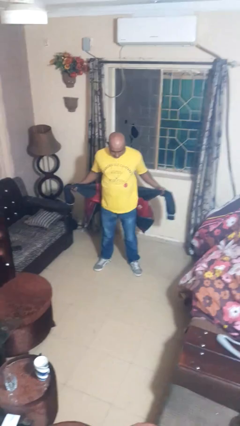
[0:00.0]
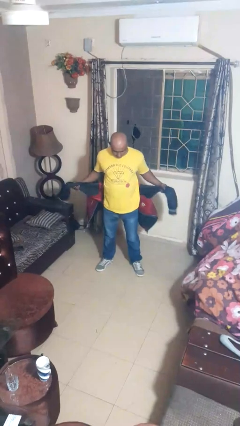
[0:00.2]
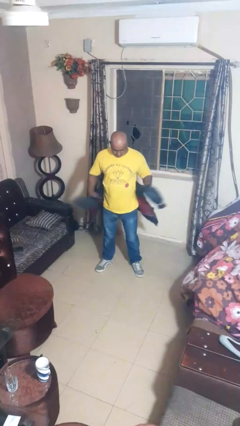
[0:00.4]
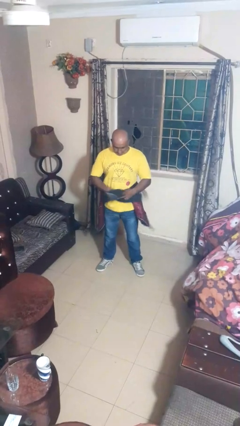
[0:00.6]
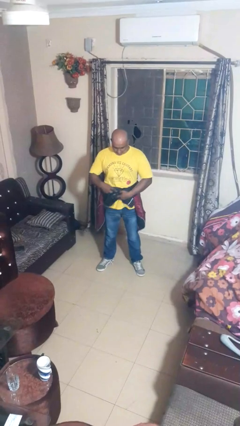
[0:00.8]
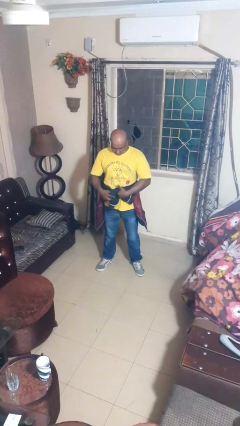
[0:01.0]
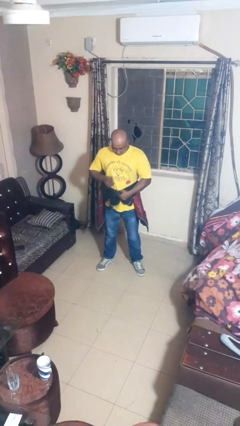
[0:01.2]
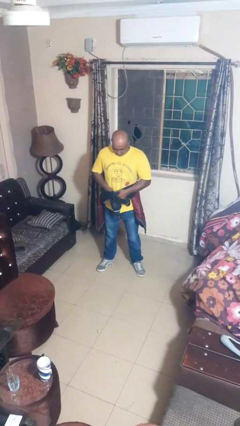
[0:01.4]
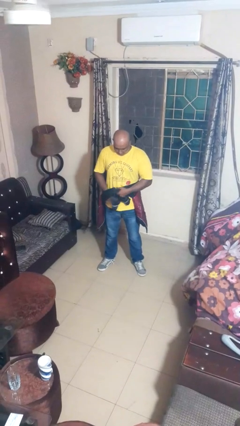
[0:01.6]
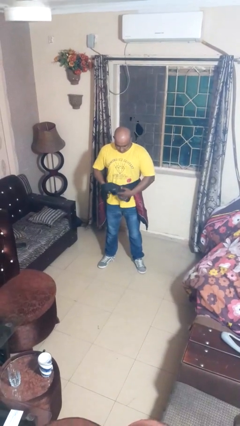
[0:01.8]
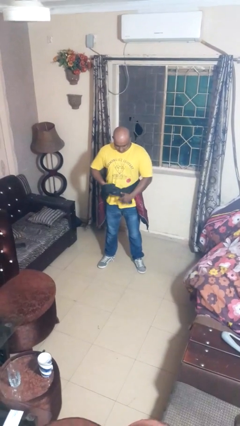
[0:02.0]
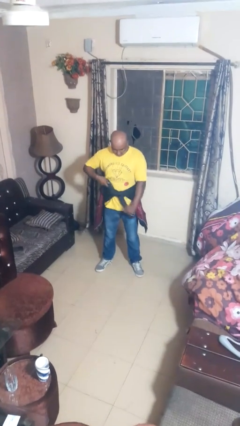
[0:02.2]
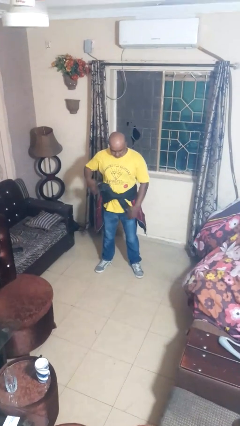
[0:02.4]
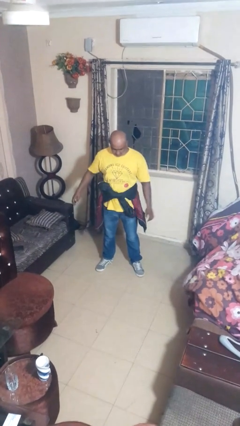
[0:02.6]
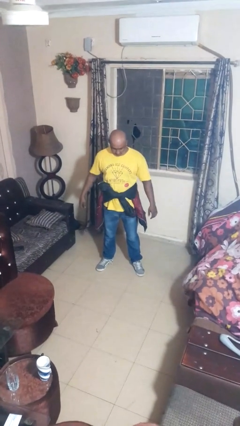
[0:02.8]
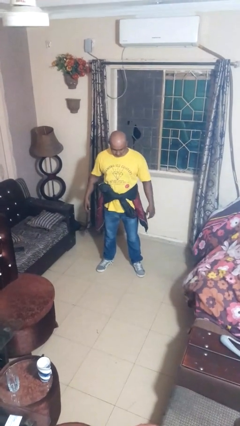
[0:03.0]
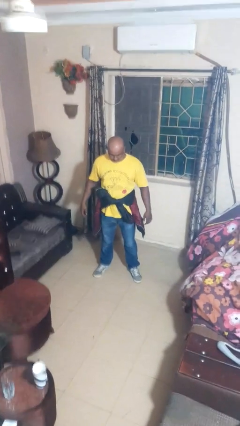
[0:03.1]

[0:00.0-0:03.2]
person ties jacket around waist

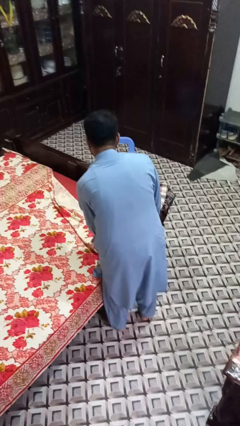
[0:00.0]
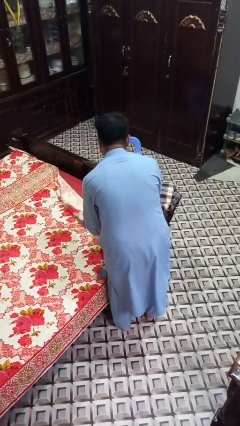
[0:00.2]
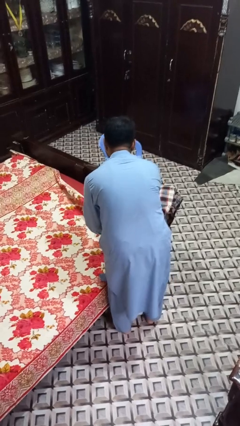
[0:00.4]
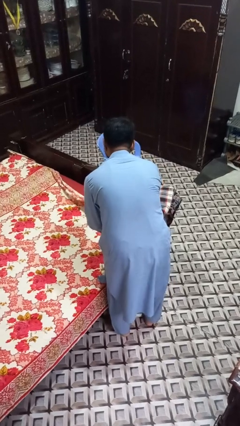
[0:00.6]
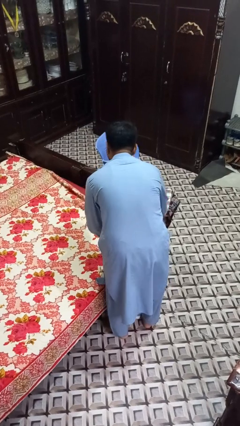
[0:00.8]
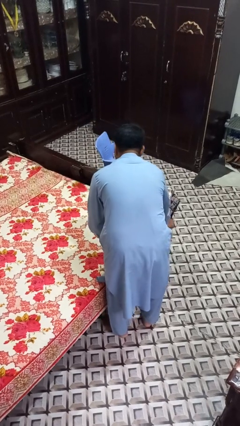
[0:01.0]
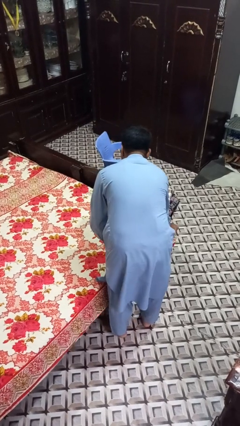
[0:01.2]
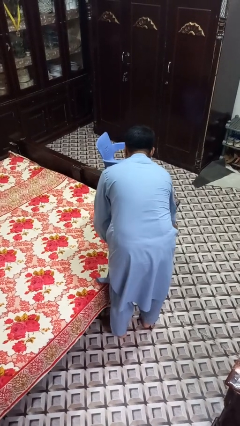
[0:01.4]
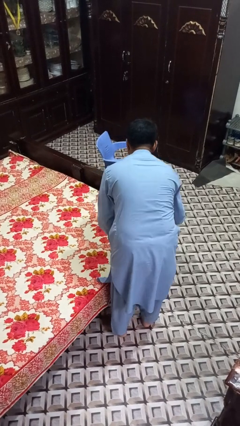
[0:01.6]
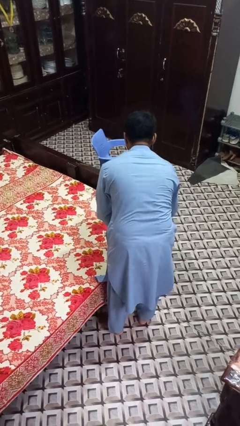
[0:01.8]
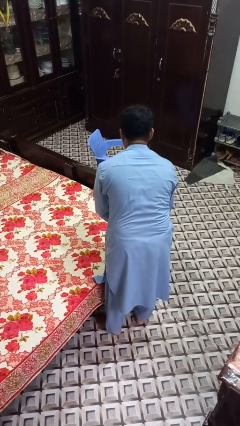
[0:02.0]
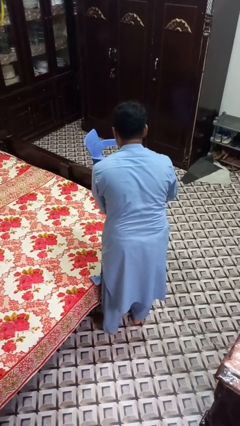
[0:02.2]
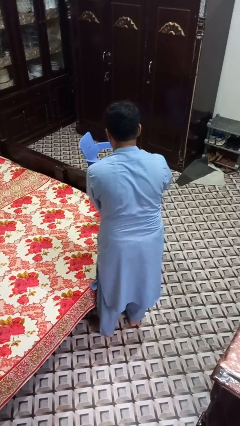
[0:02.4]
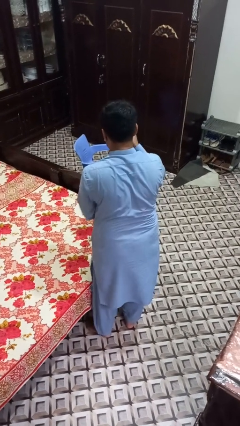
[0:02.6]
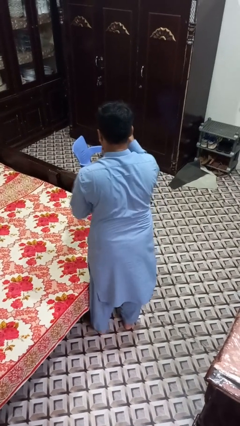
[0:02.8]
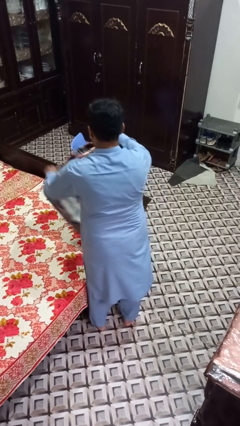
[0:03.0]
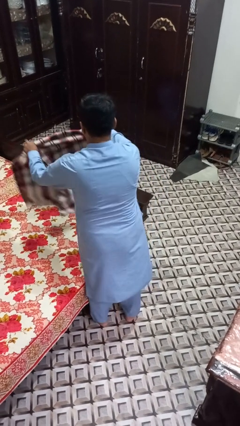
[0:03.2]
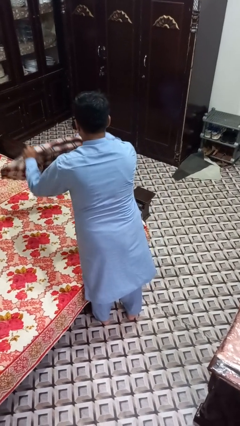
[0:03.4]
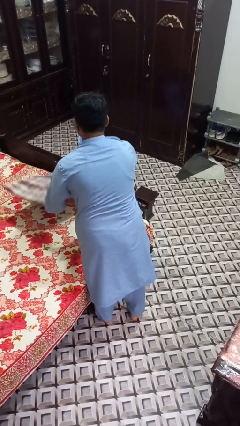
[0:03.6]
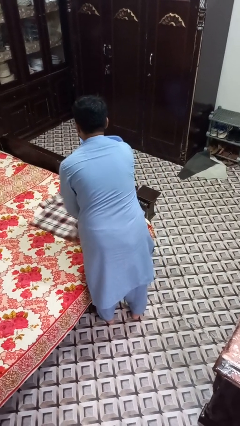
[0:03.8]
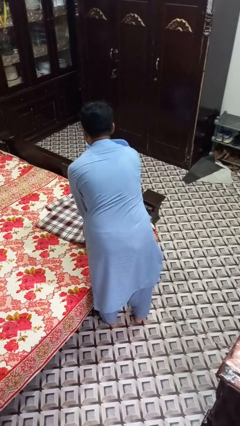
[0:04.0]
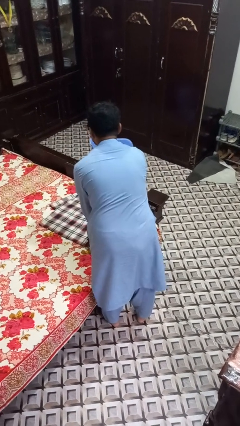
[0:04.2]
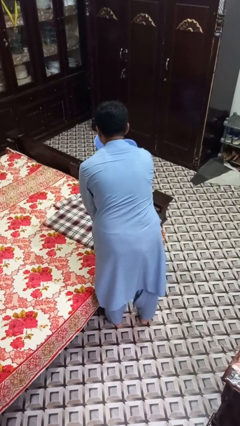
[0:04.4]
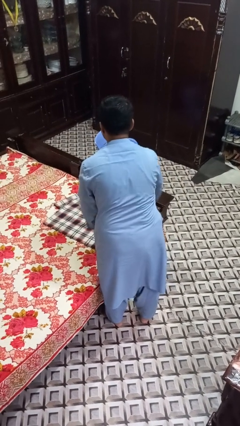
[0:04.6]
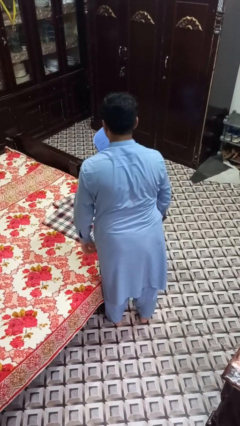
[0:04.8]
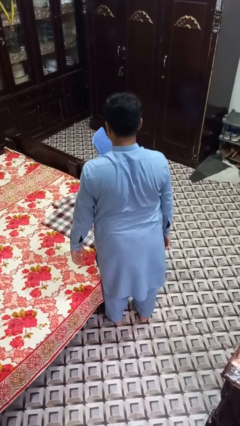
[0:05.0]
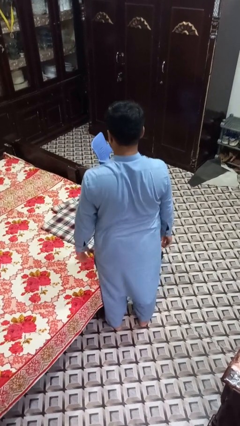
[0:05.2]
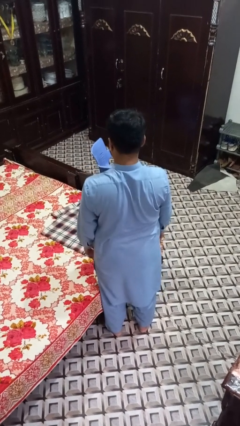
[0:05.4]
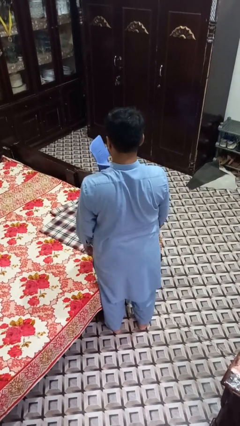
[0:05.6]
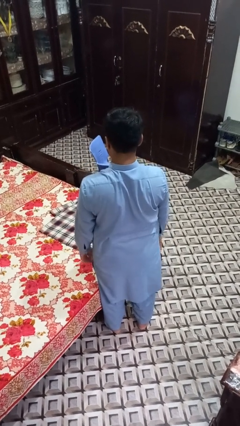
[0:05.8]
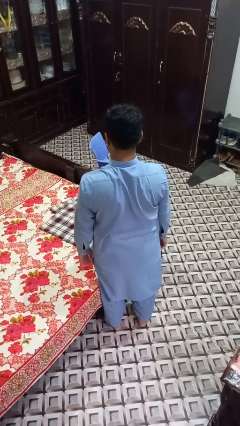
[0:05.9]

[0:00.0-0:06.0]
person makes bed

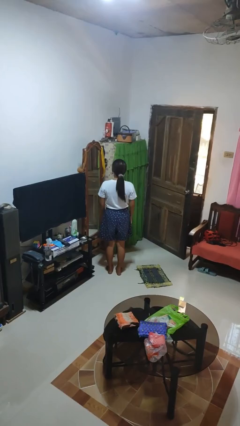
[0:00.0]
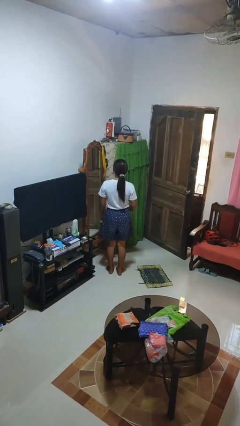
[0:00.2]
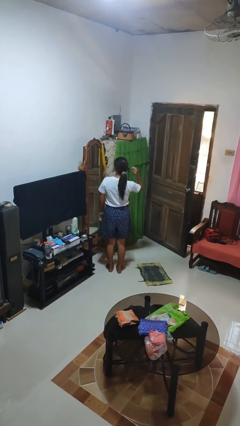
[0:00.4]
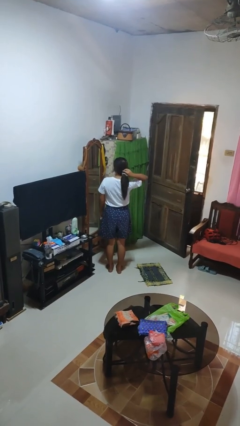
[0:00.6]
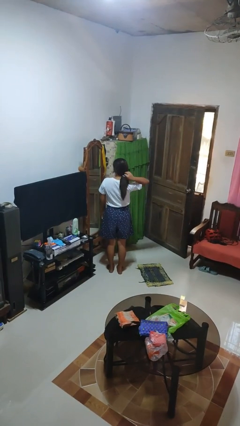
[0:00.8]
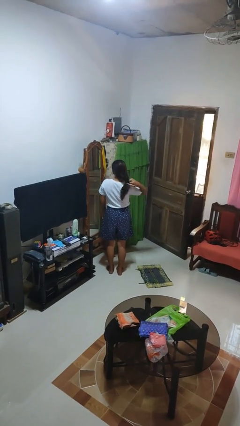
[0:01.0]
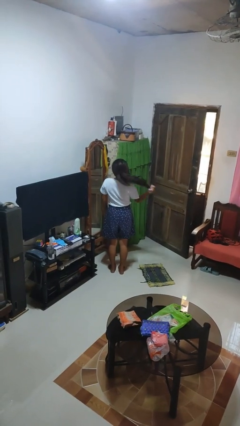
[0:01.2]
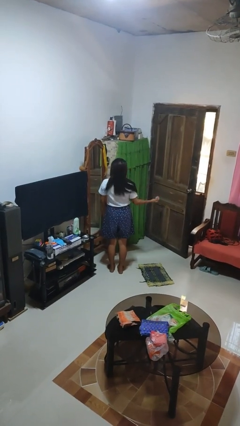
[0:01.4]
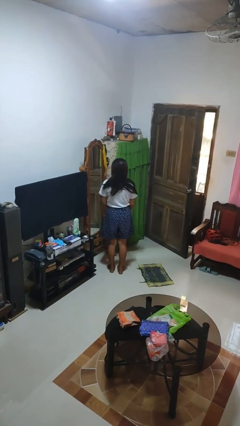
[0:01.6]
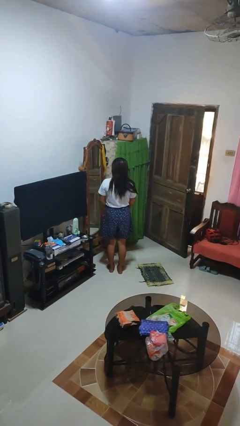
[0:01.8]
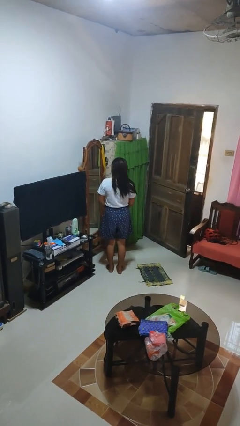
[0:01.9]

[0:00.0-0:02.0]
person takes off hairtie

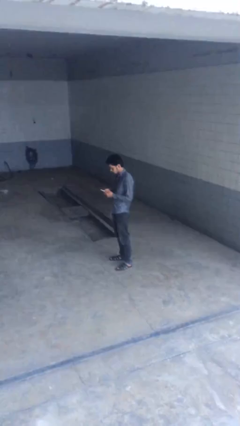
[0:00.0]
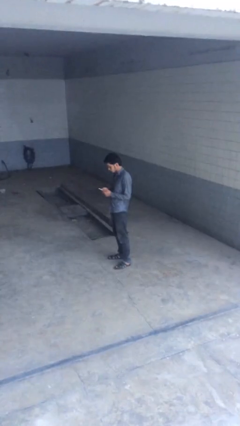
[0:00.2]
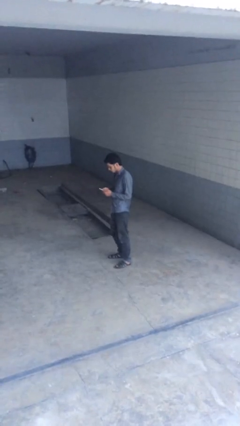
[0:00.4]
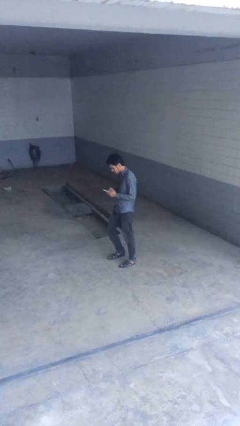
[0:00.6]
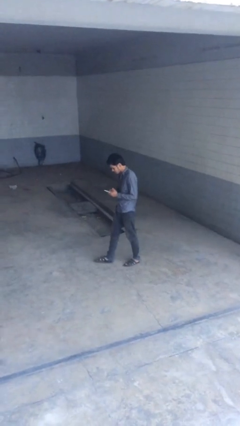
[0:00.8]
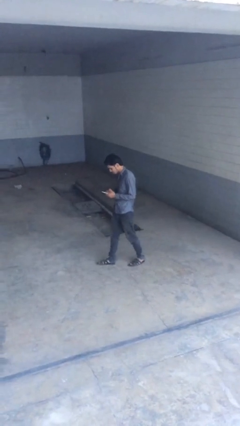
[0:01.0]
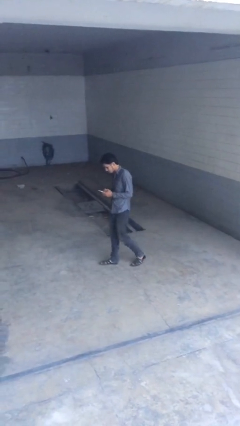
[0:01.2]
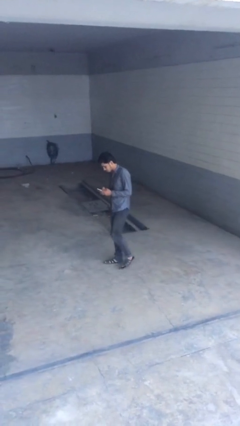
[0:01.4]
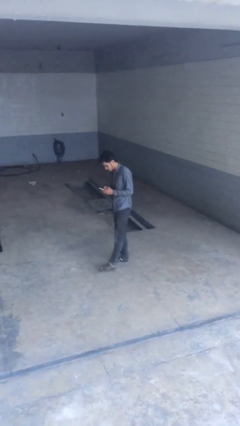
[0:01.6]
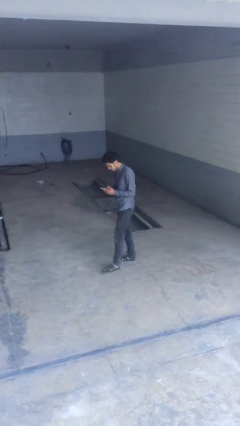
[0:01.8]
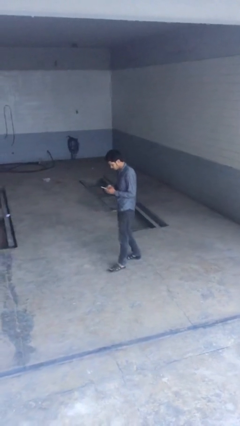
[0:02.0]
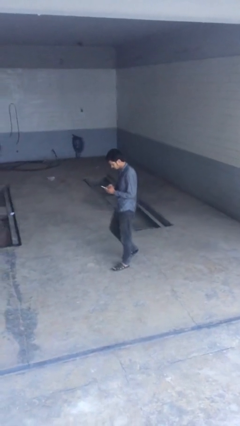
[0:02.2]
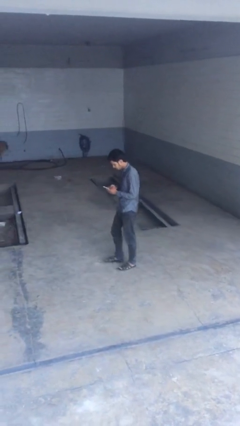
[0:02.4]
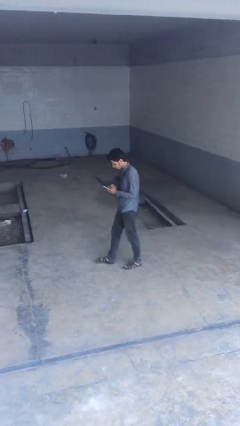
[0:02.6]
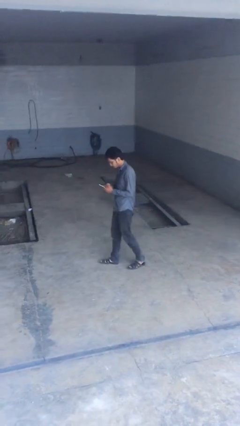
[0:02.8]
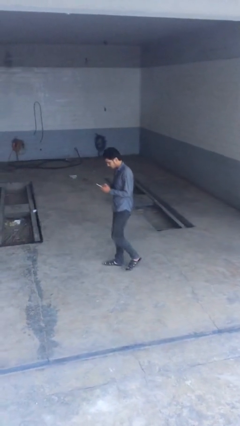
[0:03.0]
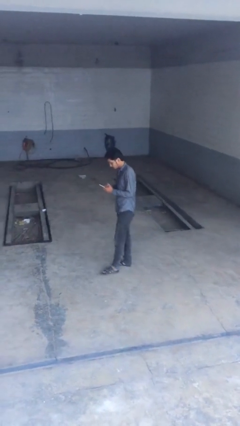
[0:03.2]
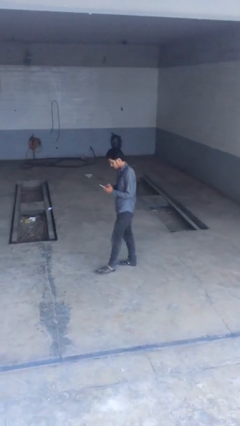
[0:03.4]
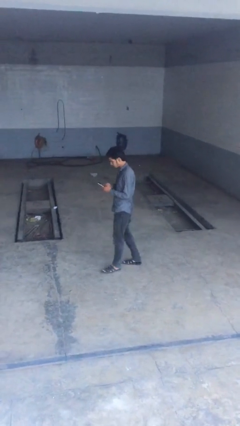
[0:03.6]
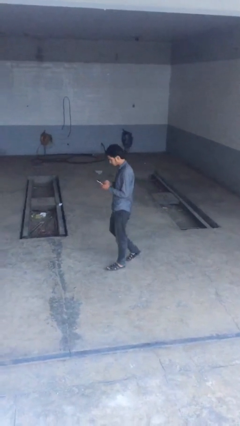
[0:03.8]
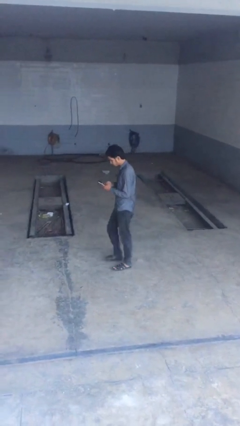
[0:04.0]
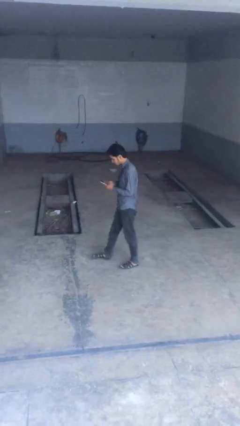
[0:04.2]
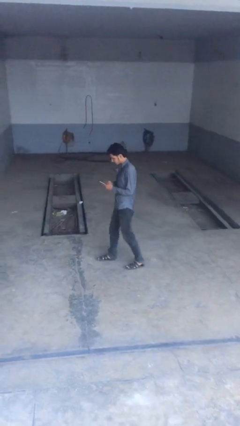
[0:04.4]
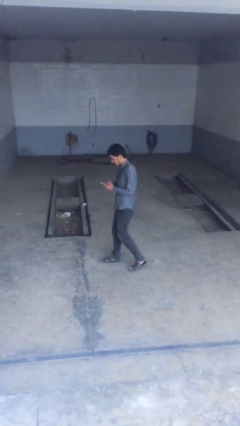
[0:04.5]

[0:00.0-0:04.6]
person texts on phone

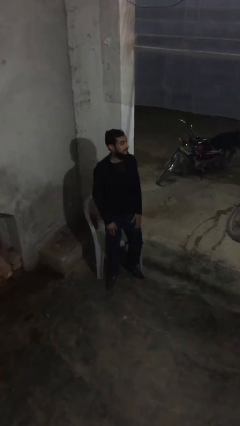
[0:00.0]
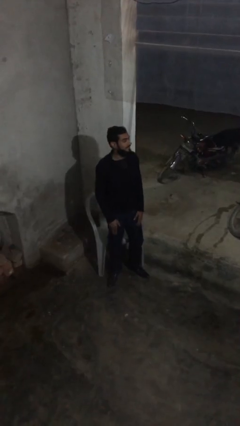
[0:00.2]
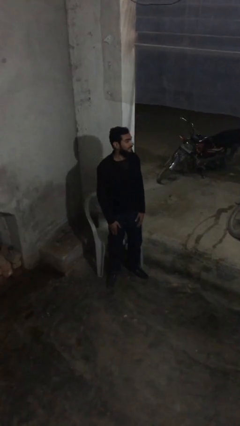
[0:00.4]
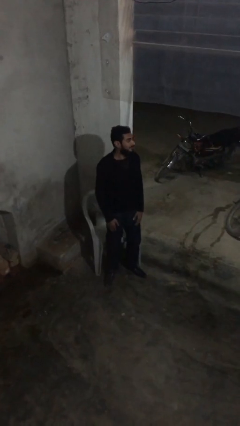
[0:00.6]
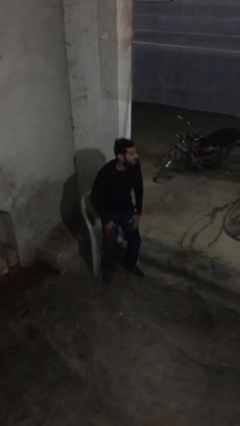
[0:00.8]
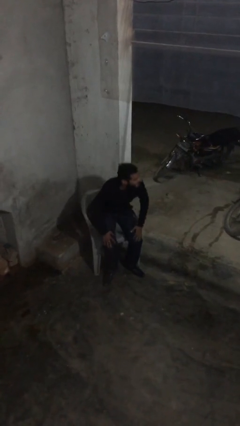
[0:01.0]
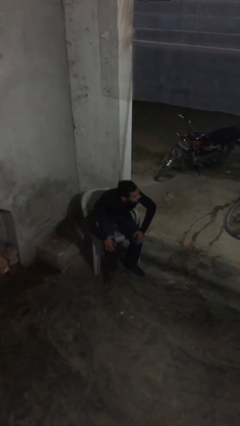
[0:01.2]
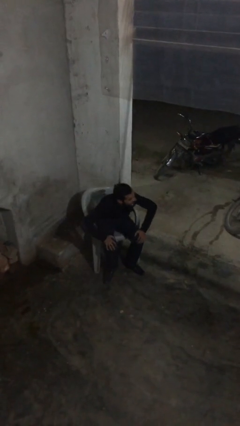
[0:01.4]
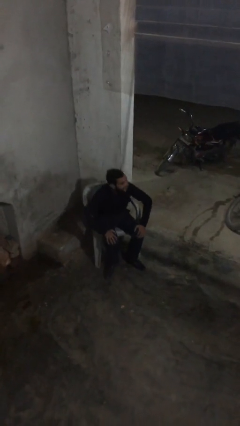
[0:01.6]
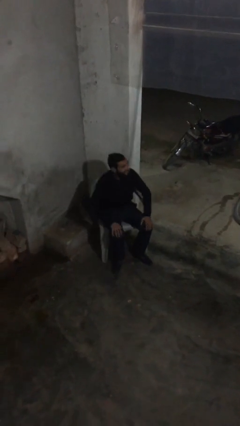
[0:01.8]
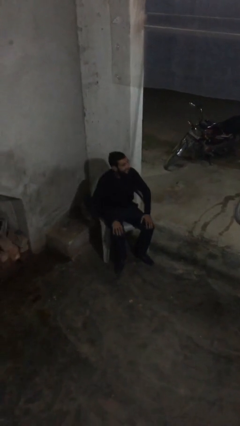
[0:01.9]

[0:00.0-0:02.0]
person sits down
